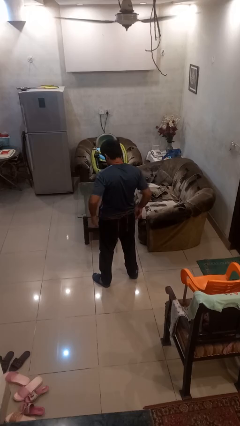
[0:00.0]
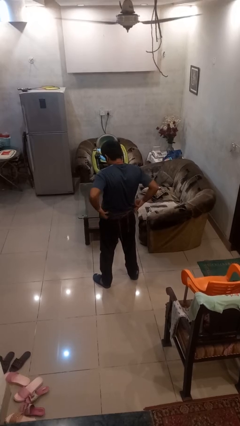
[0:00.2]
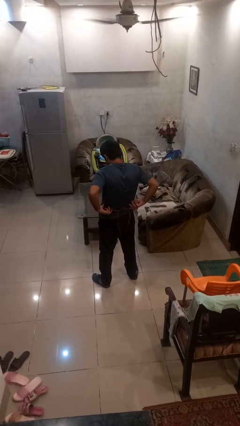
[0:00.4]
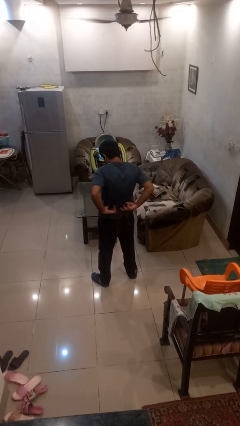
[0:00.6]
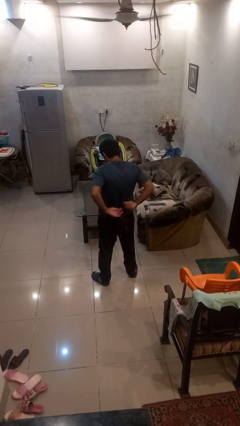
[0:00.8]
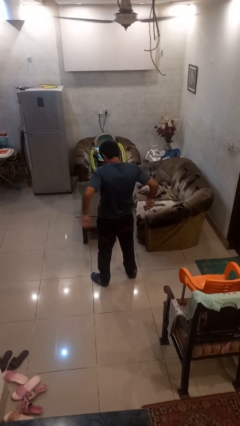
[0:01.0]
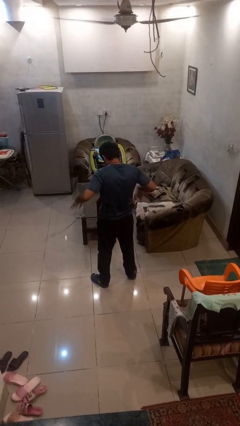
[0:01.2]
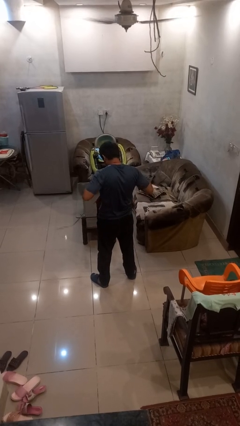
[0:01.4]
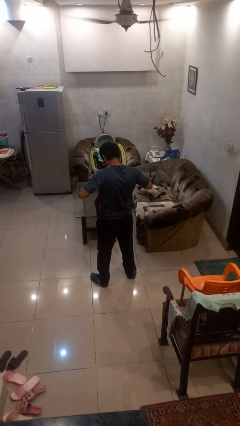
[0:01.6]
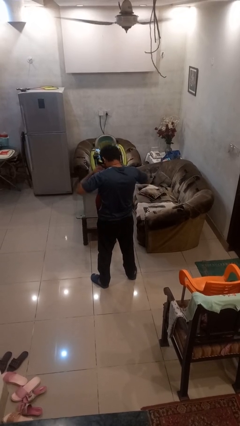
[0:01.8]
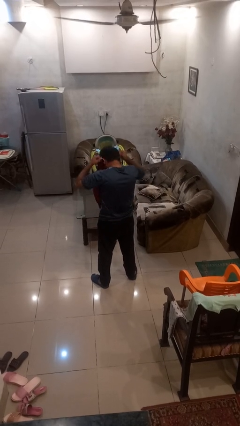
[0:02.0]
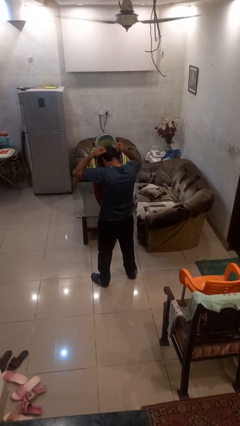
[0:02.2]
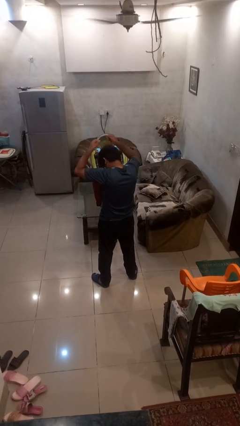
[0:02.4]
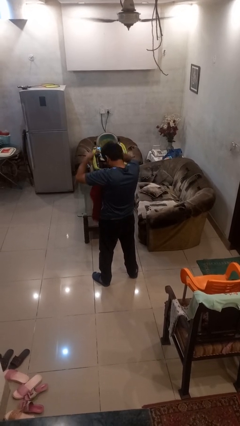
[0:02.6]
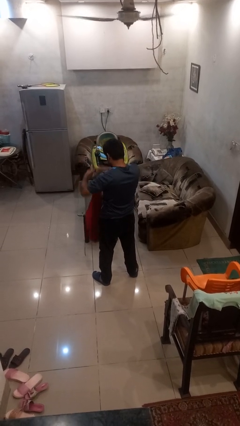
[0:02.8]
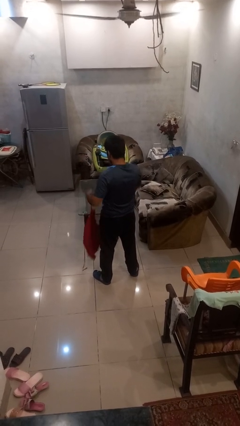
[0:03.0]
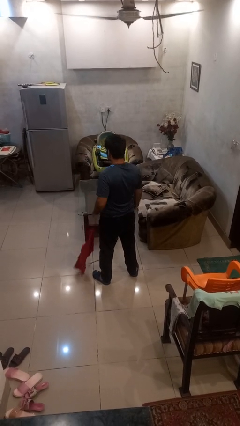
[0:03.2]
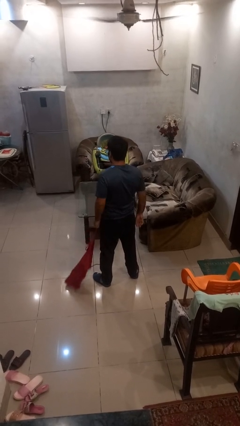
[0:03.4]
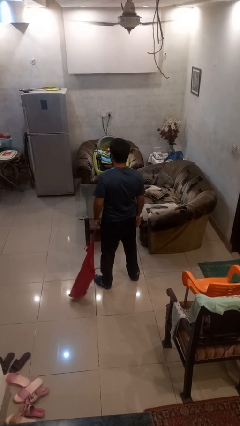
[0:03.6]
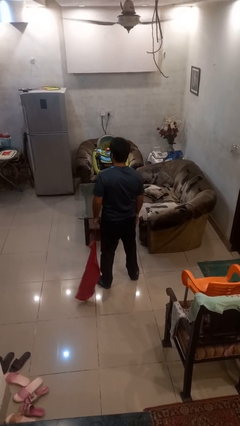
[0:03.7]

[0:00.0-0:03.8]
person takes off apron

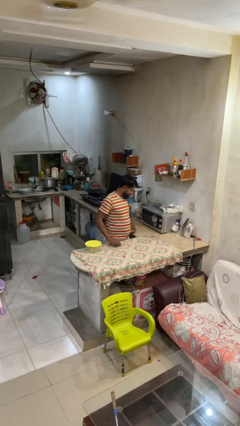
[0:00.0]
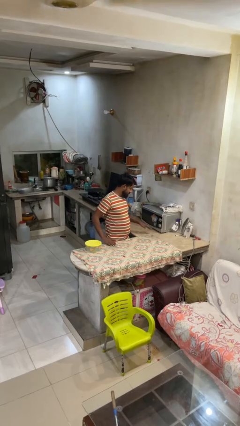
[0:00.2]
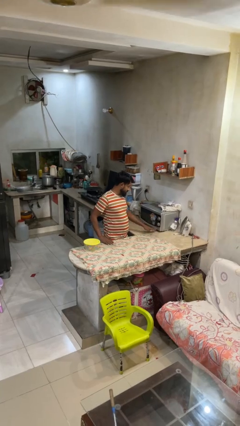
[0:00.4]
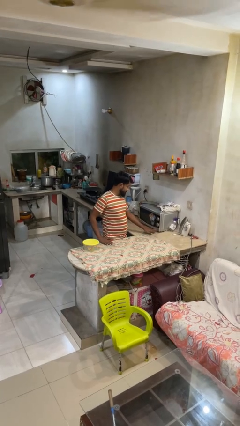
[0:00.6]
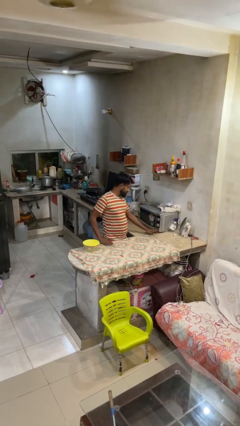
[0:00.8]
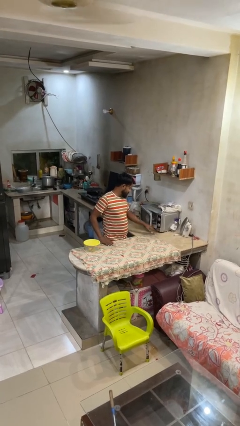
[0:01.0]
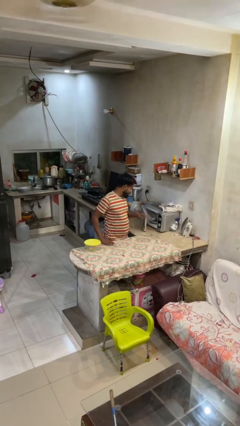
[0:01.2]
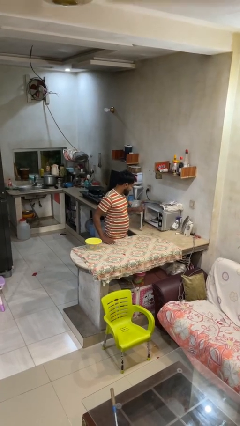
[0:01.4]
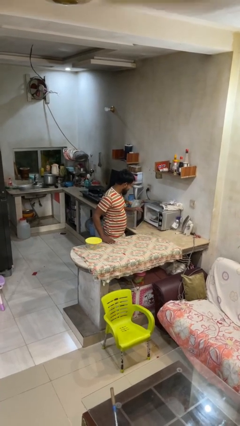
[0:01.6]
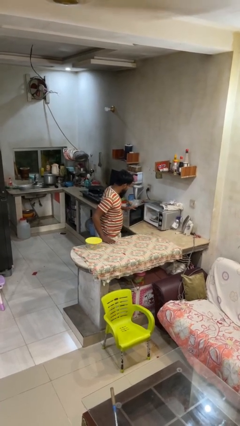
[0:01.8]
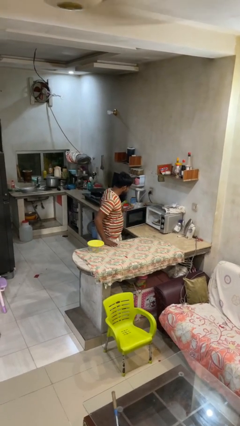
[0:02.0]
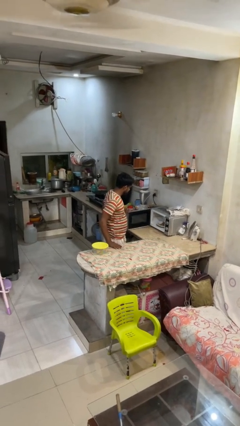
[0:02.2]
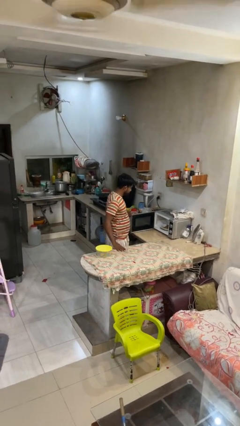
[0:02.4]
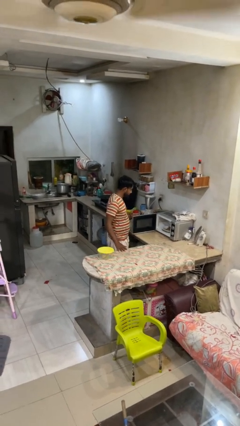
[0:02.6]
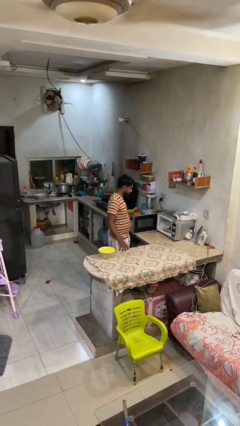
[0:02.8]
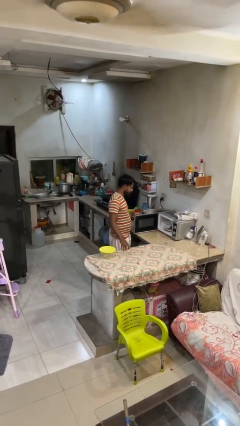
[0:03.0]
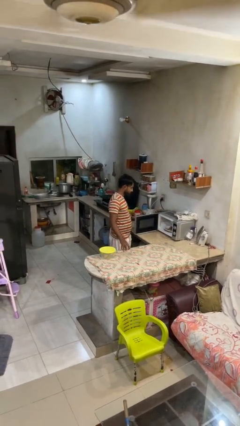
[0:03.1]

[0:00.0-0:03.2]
person opens microwave

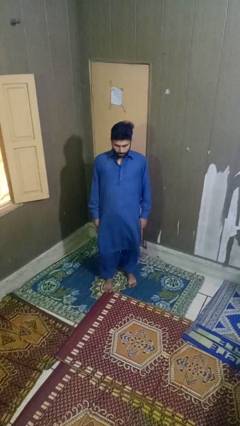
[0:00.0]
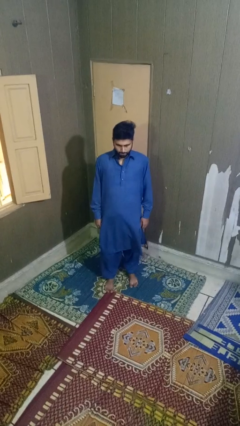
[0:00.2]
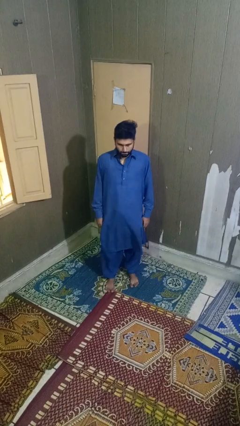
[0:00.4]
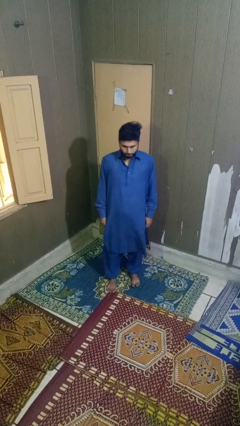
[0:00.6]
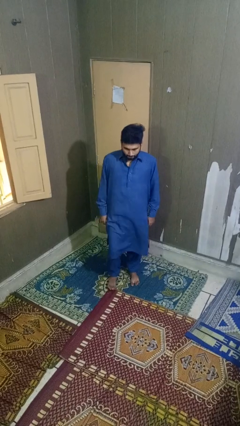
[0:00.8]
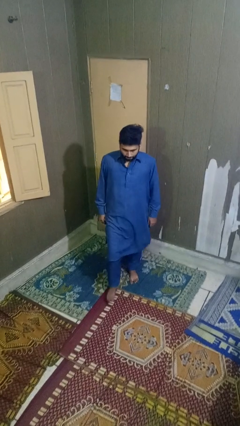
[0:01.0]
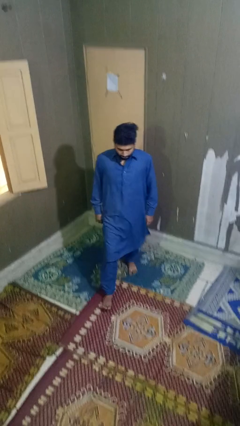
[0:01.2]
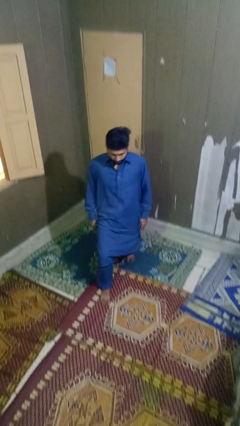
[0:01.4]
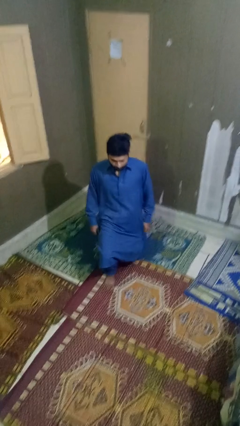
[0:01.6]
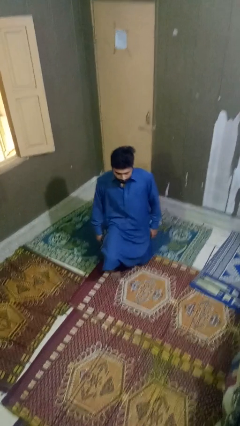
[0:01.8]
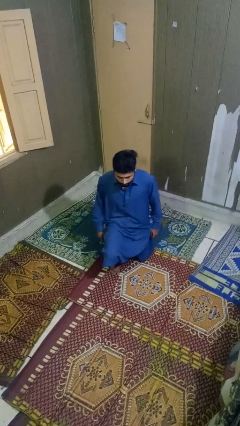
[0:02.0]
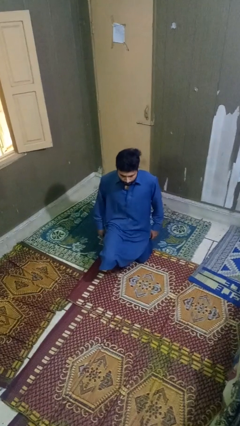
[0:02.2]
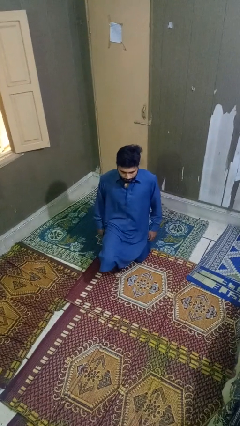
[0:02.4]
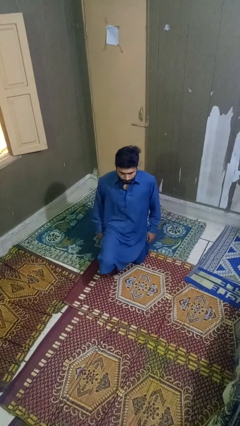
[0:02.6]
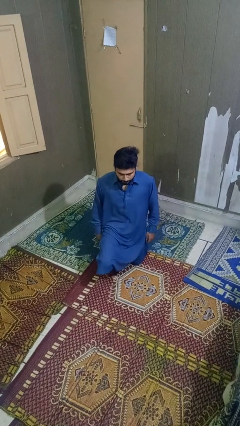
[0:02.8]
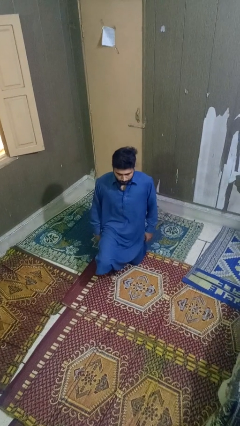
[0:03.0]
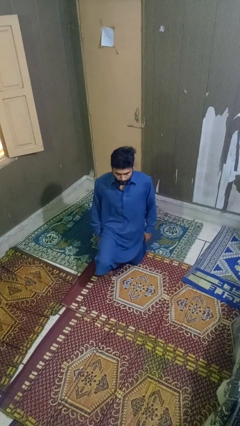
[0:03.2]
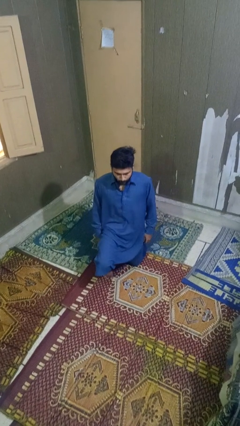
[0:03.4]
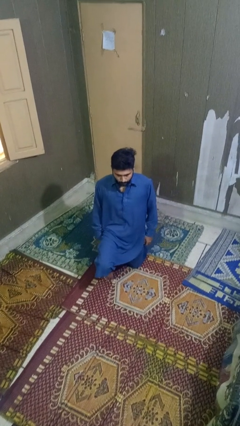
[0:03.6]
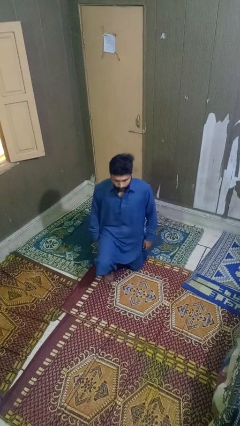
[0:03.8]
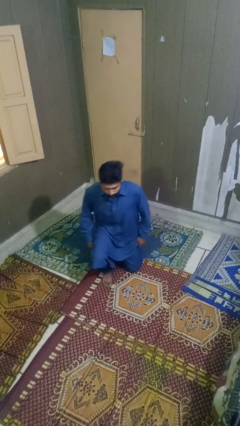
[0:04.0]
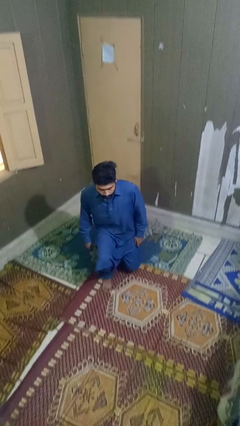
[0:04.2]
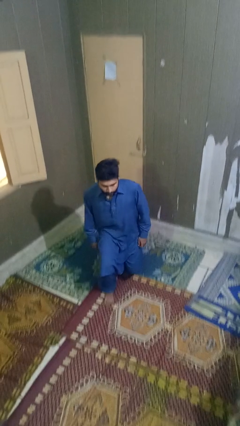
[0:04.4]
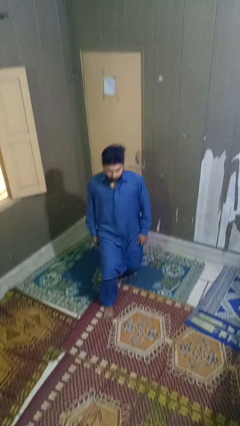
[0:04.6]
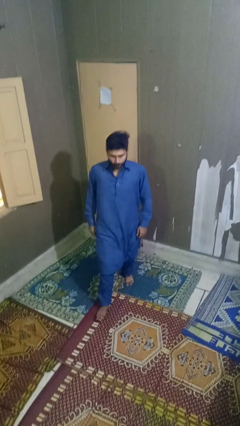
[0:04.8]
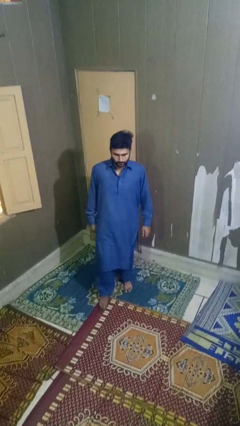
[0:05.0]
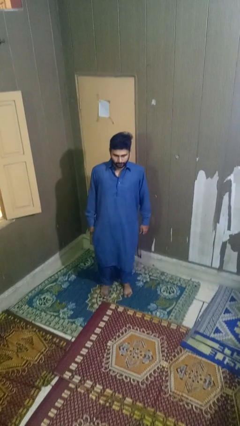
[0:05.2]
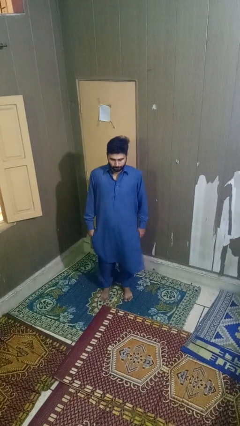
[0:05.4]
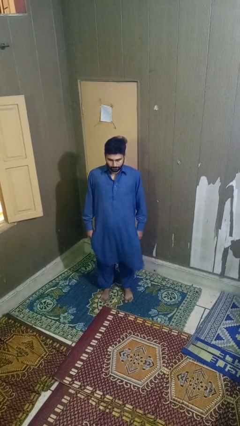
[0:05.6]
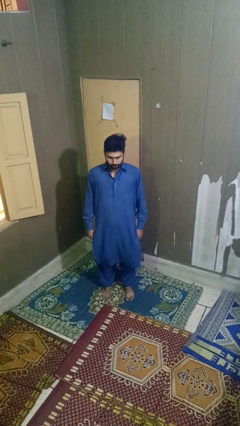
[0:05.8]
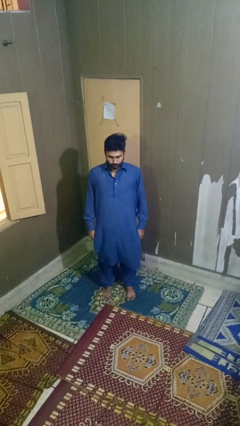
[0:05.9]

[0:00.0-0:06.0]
person exercises with lunges

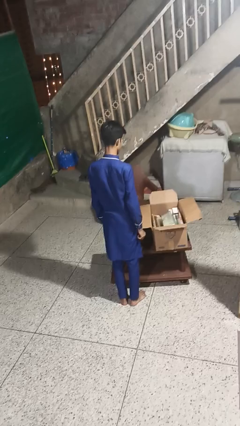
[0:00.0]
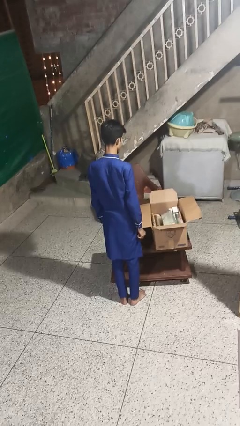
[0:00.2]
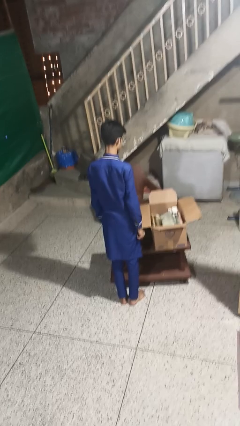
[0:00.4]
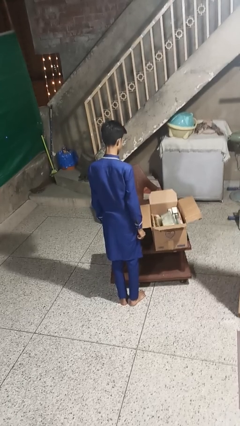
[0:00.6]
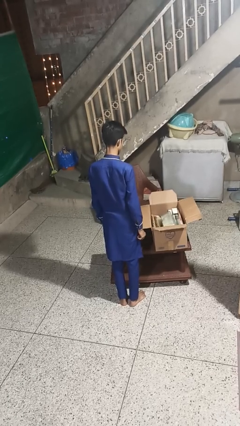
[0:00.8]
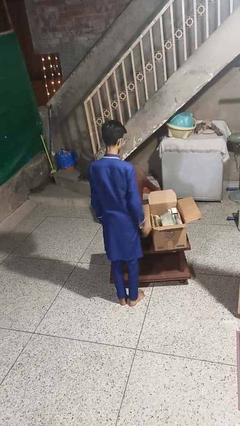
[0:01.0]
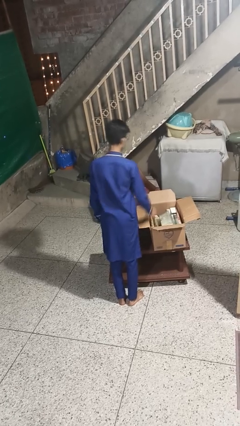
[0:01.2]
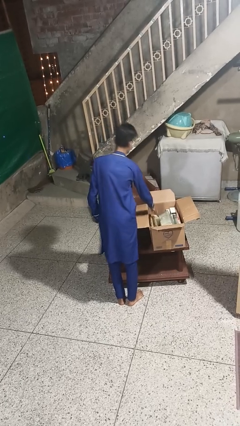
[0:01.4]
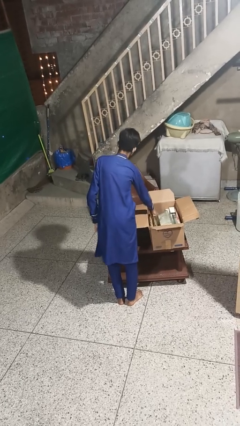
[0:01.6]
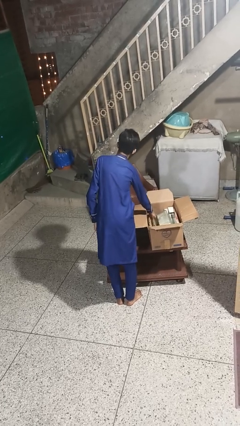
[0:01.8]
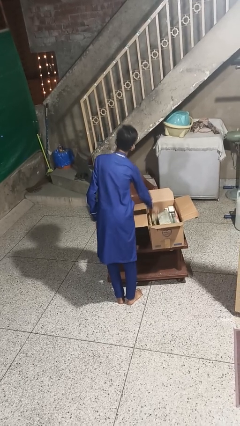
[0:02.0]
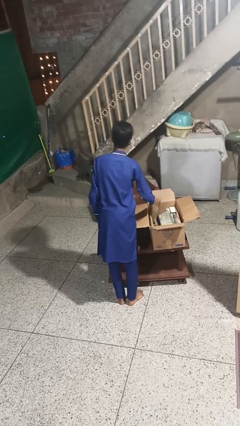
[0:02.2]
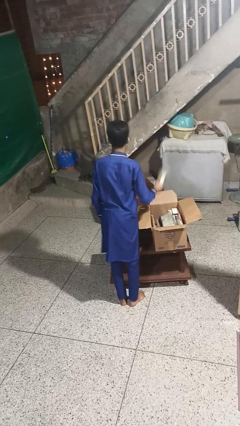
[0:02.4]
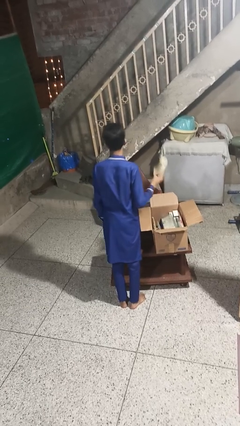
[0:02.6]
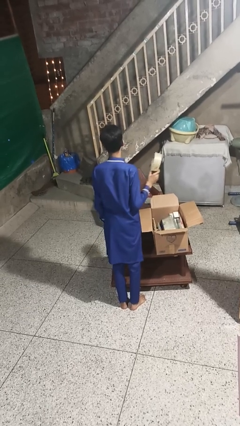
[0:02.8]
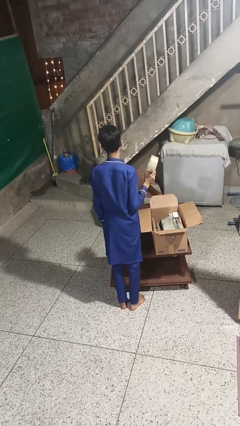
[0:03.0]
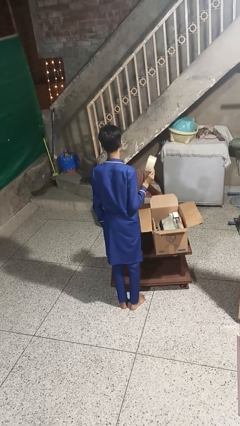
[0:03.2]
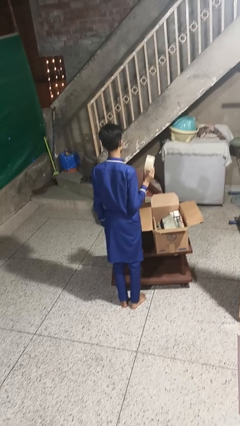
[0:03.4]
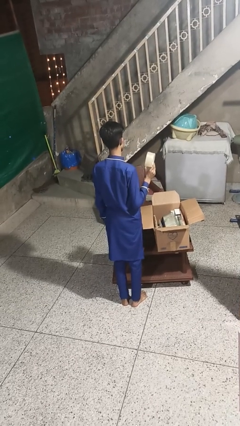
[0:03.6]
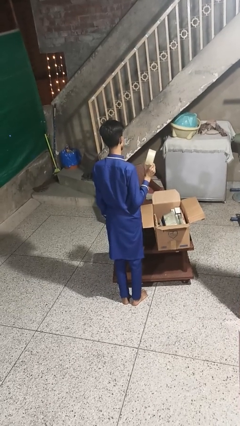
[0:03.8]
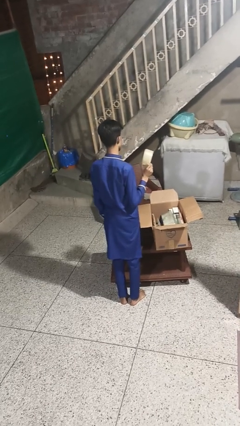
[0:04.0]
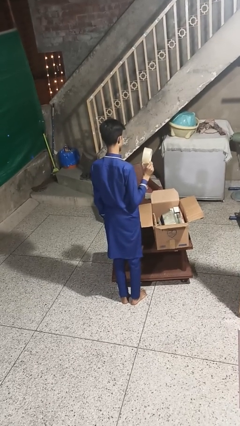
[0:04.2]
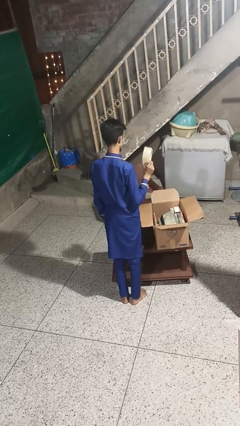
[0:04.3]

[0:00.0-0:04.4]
person takes object from box

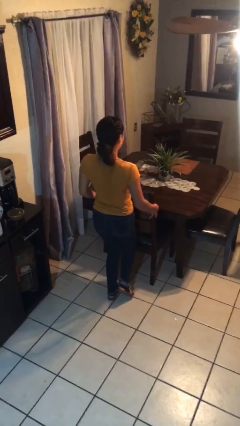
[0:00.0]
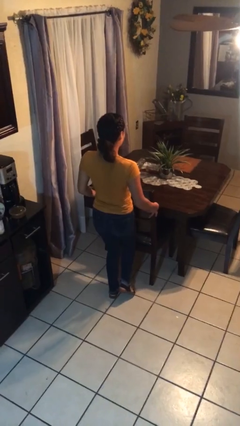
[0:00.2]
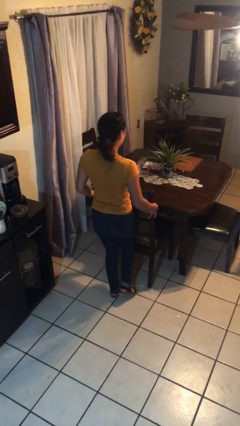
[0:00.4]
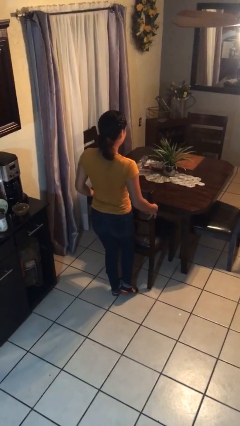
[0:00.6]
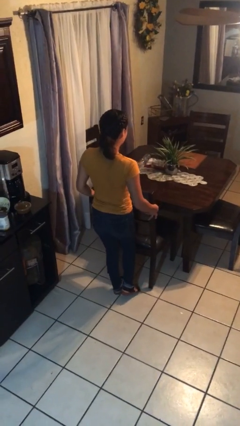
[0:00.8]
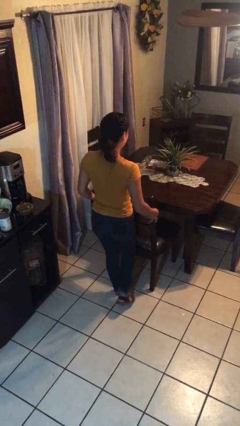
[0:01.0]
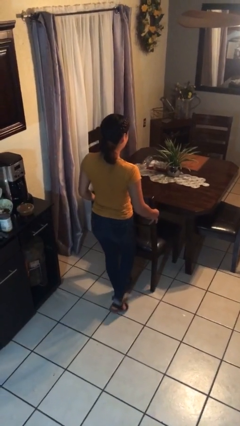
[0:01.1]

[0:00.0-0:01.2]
person pulls out chair
